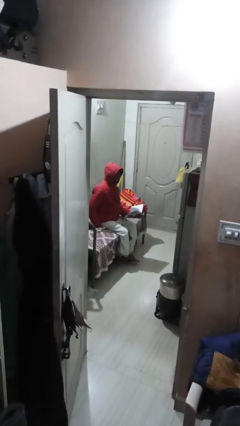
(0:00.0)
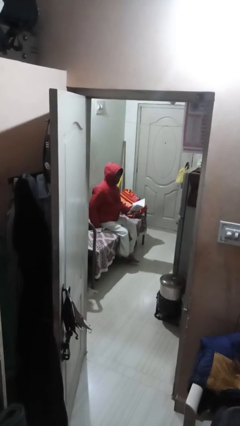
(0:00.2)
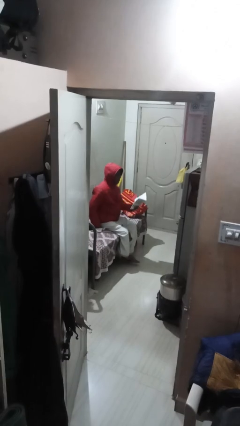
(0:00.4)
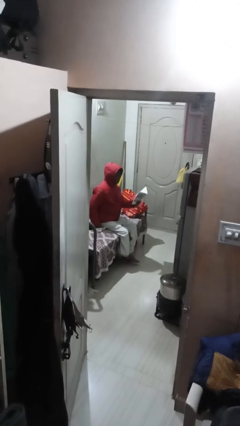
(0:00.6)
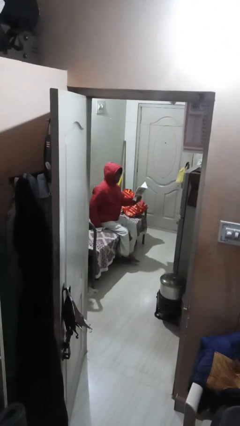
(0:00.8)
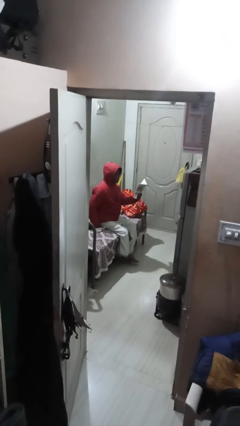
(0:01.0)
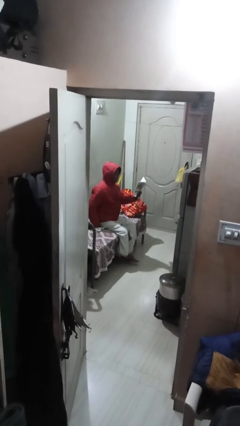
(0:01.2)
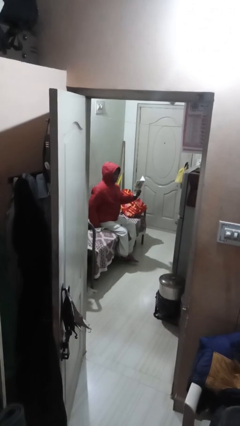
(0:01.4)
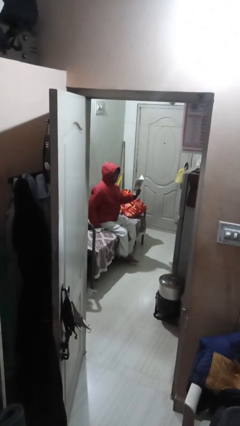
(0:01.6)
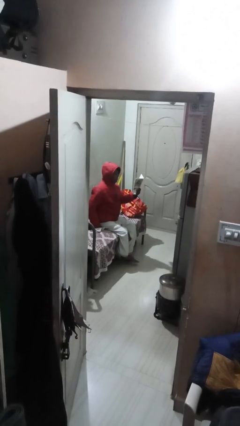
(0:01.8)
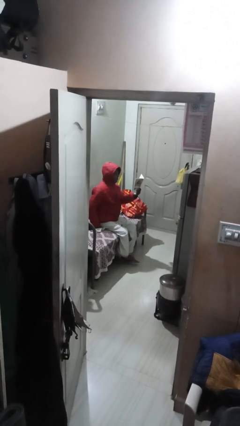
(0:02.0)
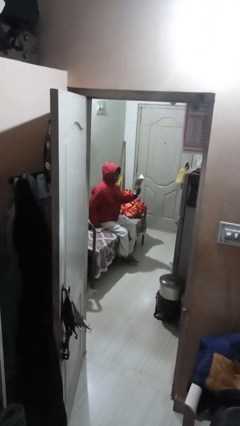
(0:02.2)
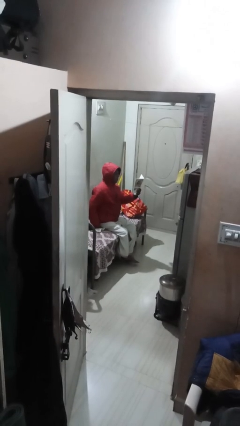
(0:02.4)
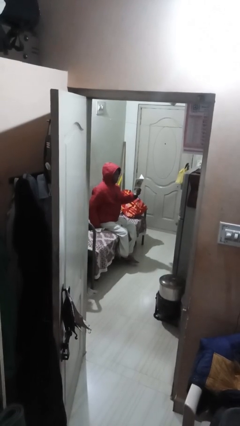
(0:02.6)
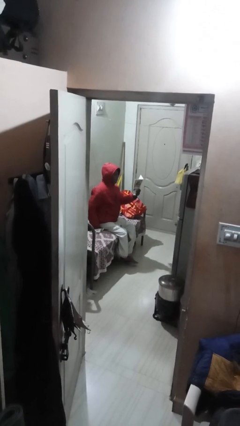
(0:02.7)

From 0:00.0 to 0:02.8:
person reads document

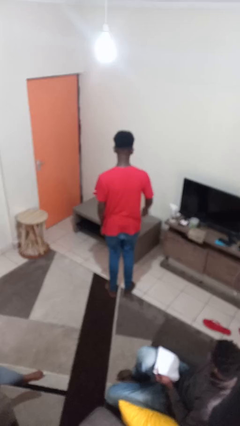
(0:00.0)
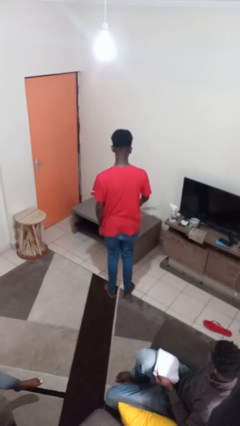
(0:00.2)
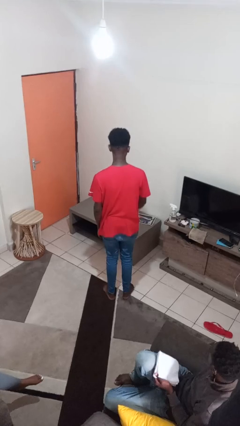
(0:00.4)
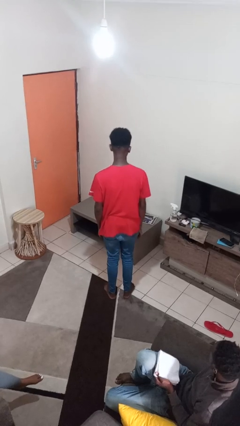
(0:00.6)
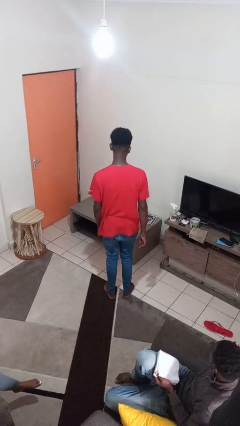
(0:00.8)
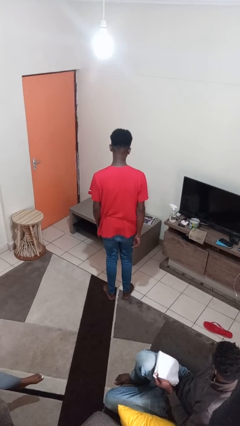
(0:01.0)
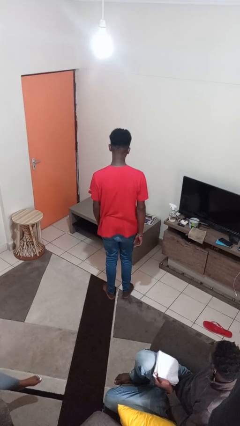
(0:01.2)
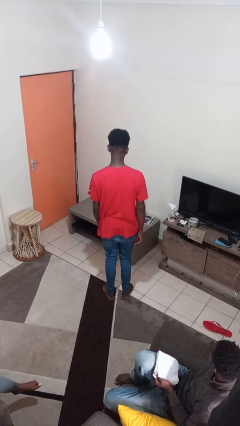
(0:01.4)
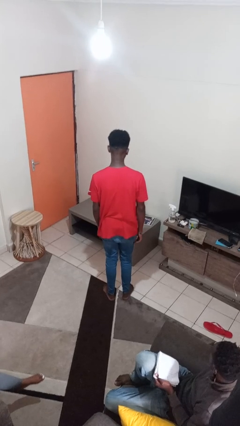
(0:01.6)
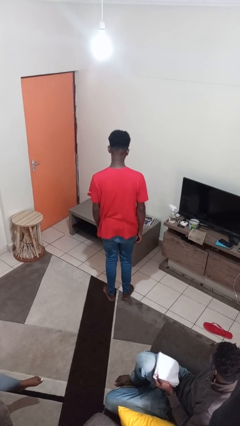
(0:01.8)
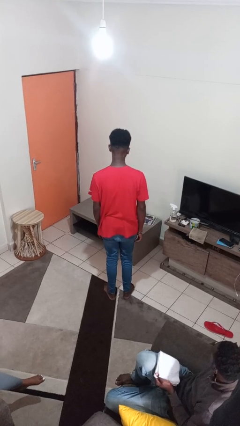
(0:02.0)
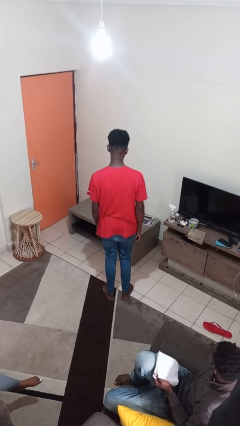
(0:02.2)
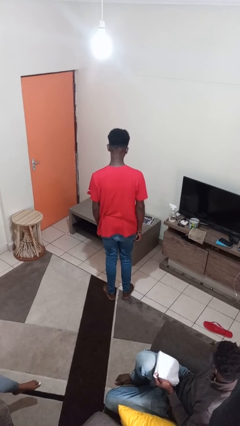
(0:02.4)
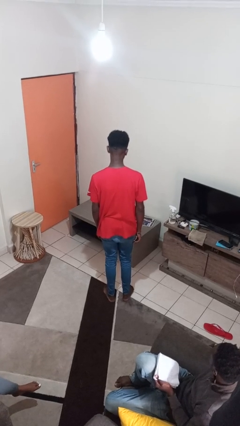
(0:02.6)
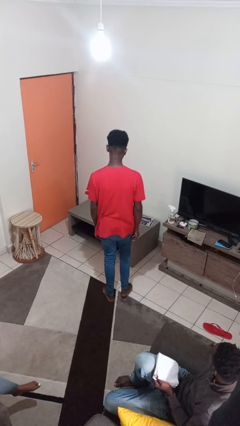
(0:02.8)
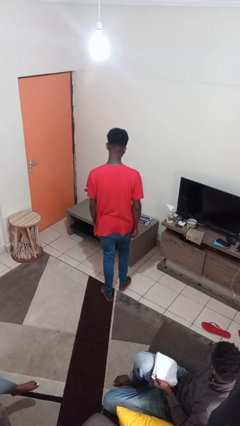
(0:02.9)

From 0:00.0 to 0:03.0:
person throws object on table

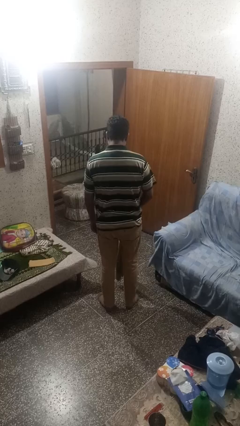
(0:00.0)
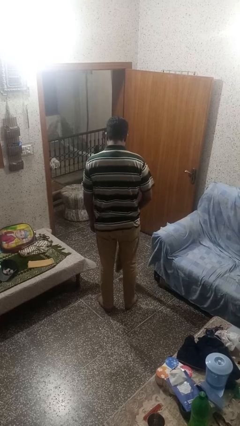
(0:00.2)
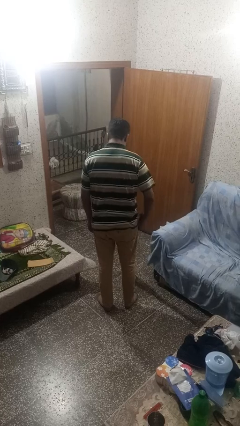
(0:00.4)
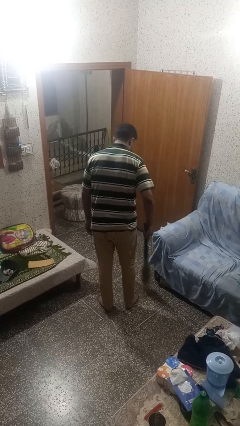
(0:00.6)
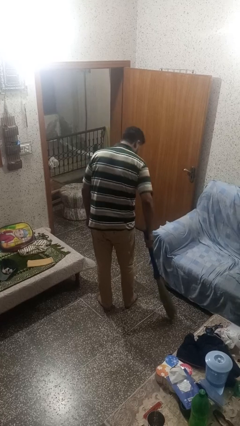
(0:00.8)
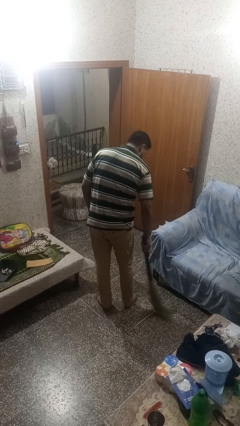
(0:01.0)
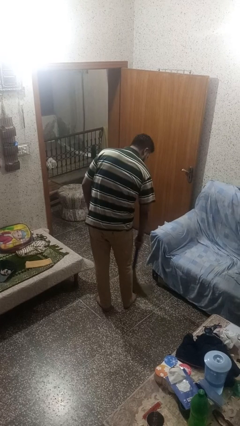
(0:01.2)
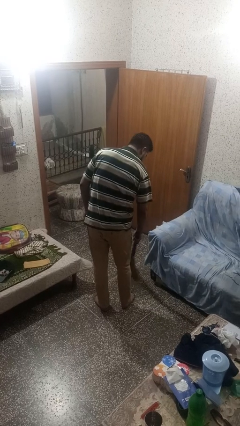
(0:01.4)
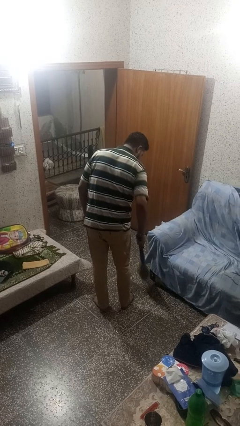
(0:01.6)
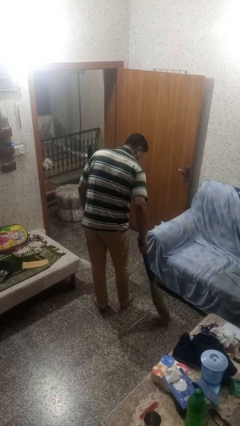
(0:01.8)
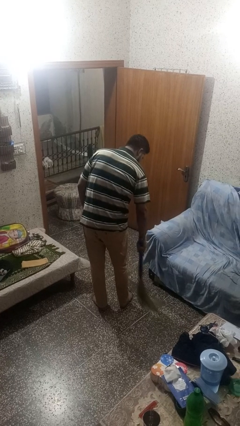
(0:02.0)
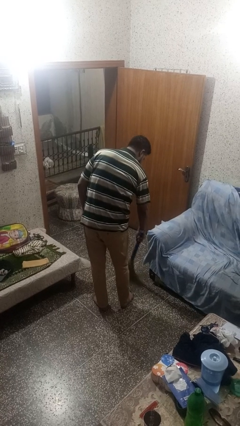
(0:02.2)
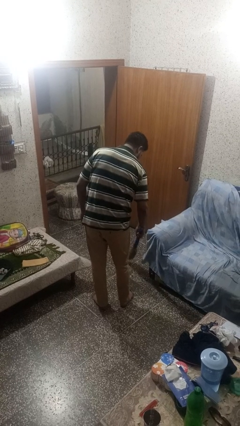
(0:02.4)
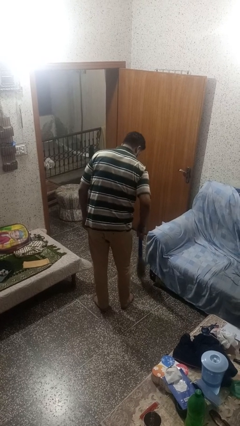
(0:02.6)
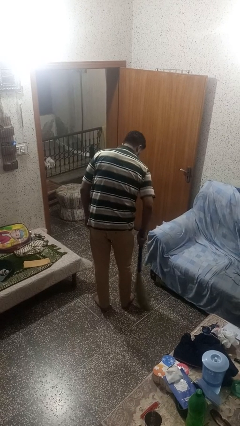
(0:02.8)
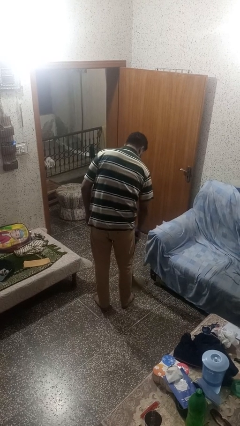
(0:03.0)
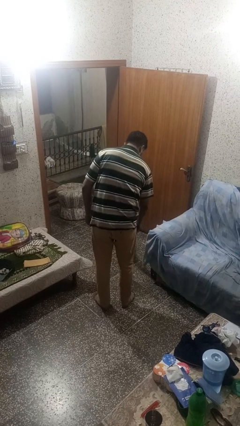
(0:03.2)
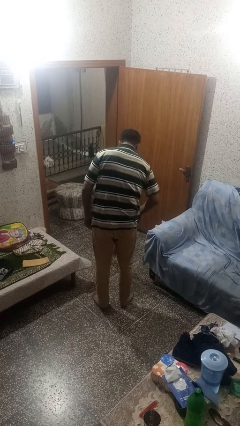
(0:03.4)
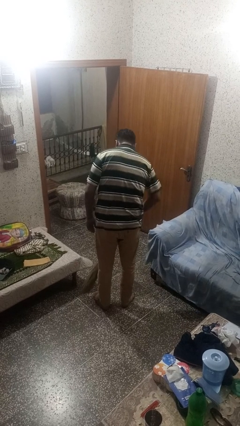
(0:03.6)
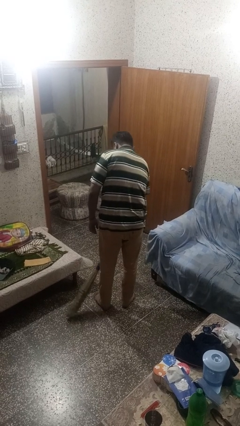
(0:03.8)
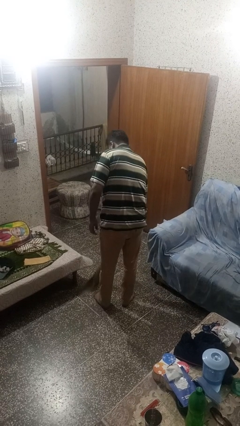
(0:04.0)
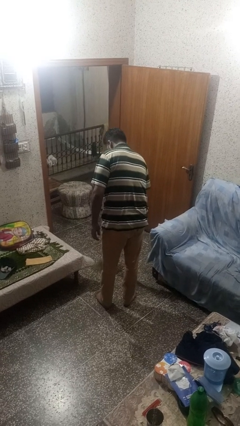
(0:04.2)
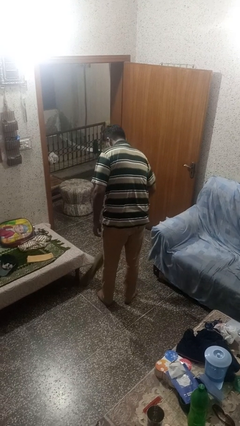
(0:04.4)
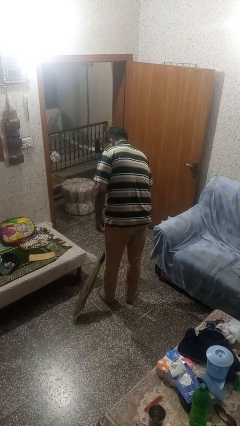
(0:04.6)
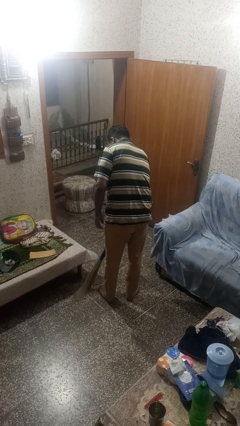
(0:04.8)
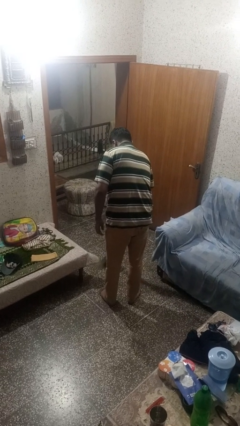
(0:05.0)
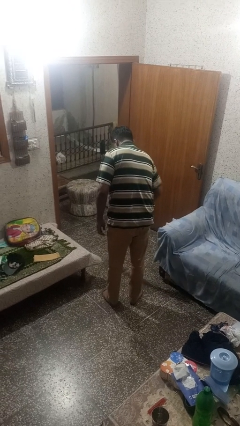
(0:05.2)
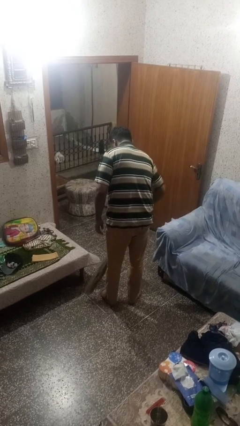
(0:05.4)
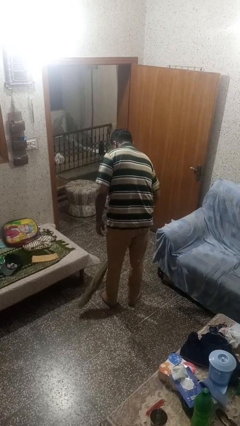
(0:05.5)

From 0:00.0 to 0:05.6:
person sweeps floor

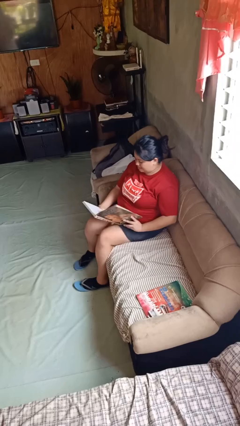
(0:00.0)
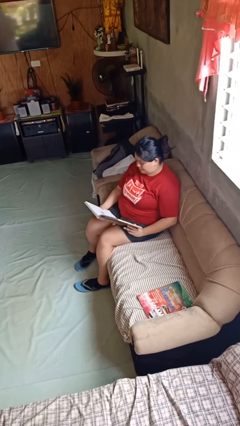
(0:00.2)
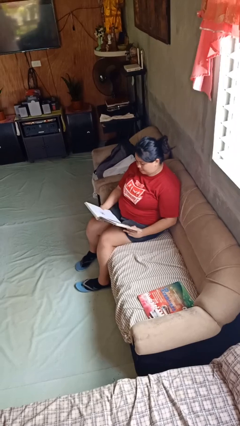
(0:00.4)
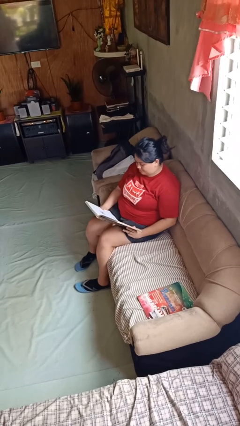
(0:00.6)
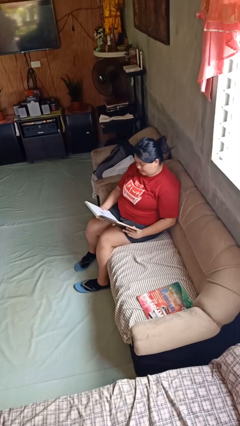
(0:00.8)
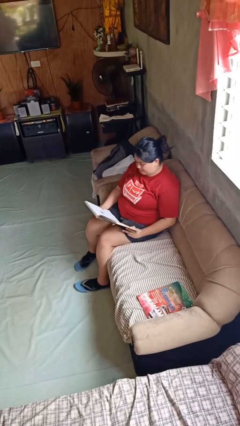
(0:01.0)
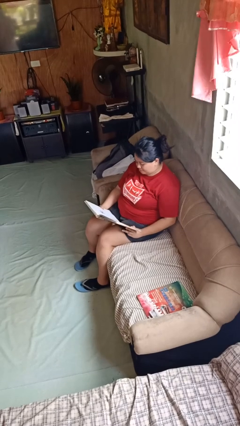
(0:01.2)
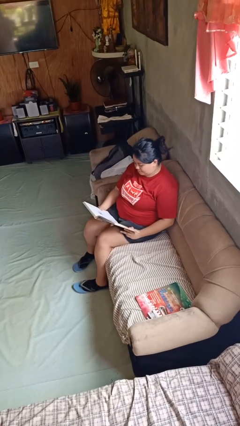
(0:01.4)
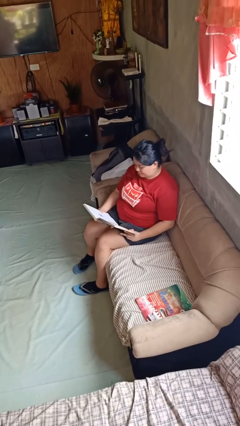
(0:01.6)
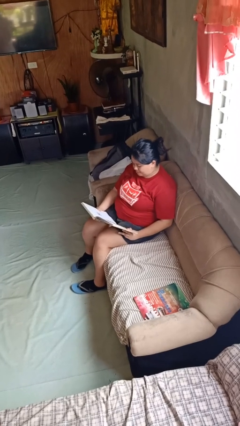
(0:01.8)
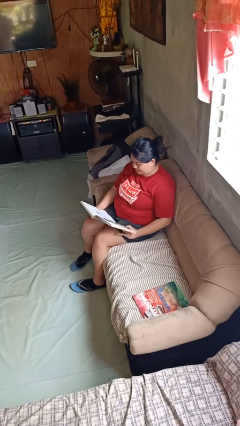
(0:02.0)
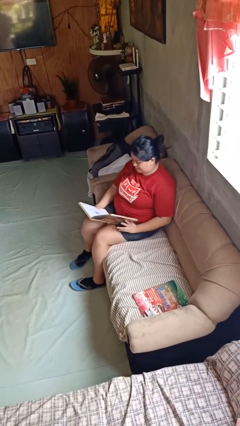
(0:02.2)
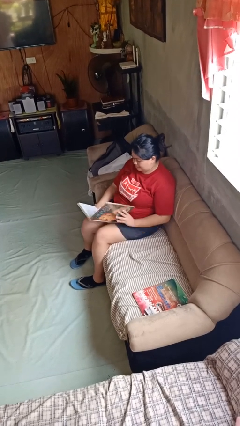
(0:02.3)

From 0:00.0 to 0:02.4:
person reads book

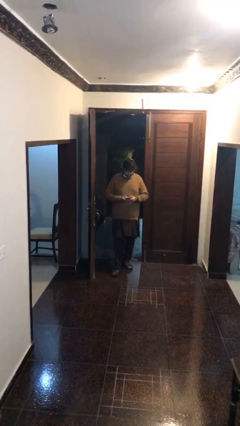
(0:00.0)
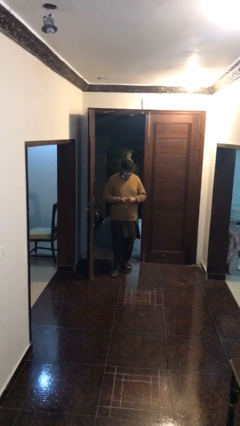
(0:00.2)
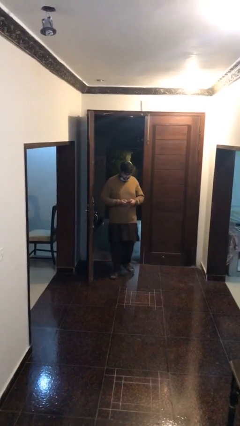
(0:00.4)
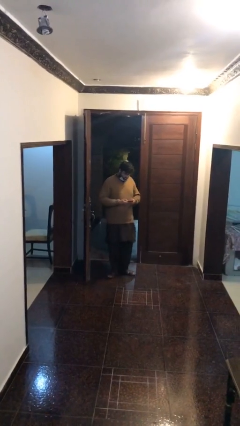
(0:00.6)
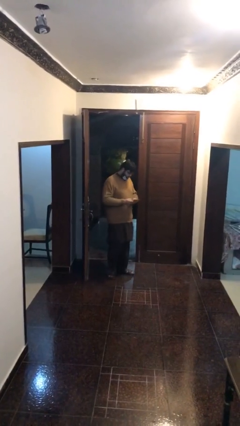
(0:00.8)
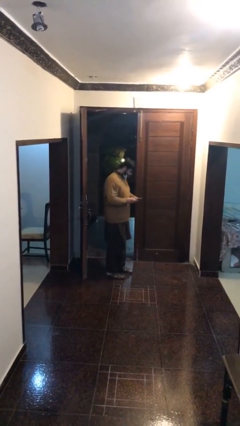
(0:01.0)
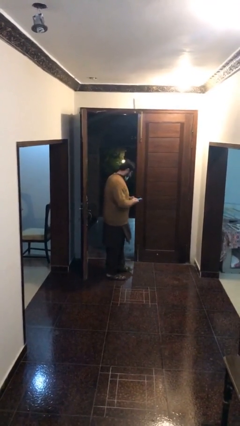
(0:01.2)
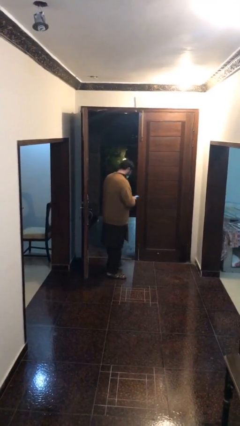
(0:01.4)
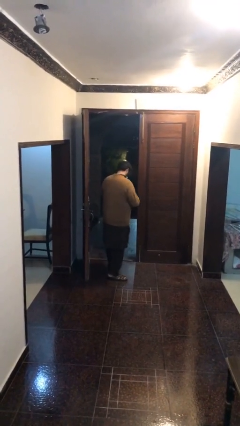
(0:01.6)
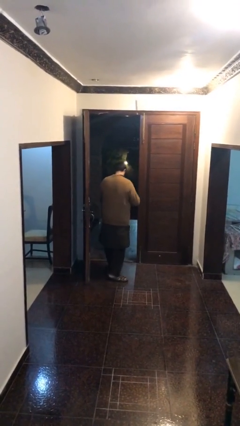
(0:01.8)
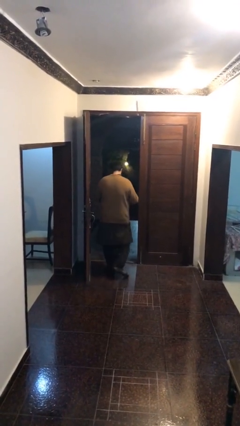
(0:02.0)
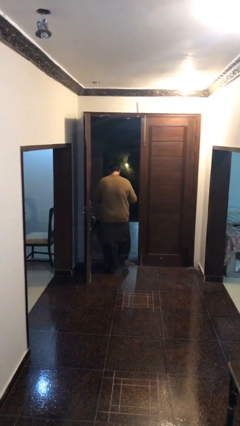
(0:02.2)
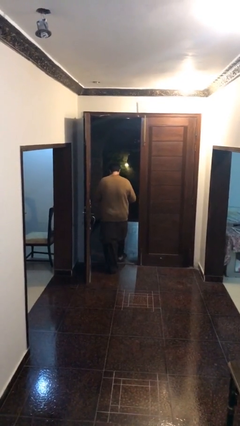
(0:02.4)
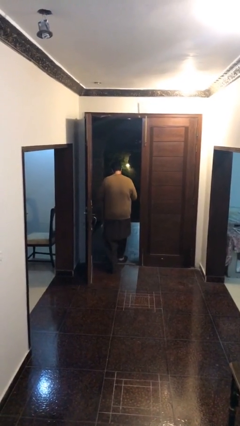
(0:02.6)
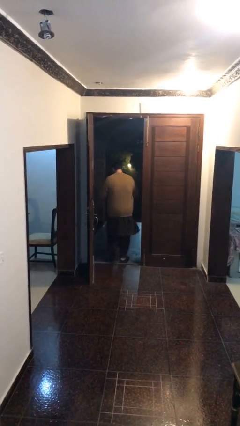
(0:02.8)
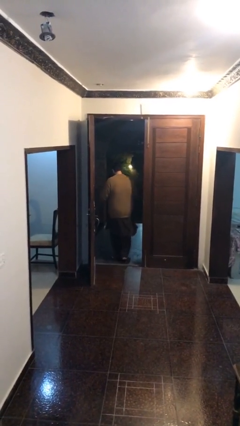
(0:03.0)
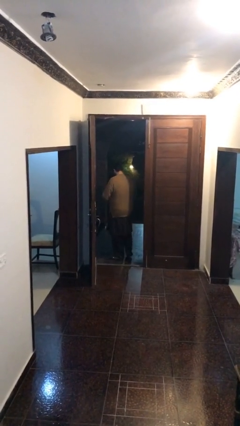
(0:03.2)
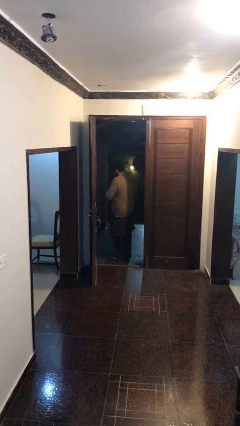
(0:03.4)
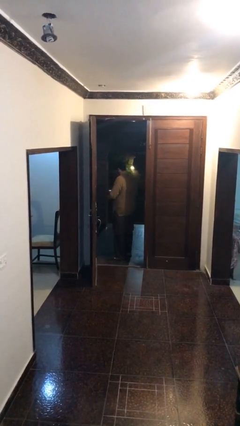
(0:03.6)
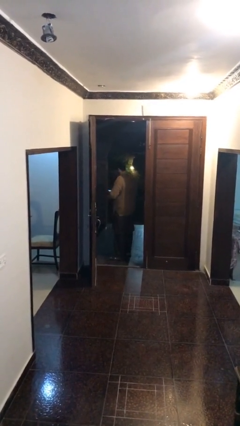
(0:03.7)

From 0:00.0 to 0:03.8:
person exits scene through structure

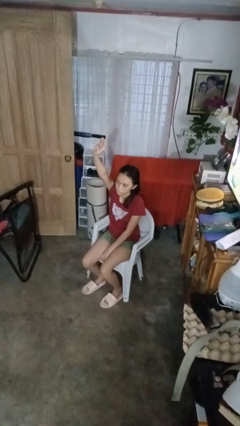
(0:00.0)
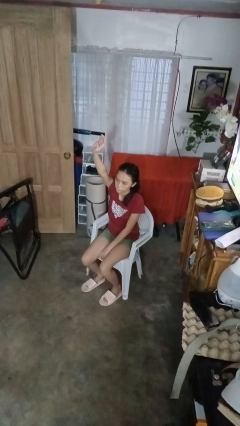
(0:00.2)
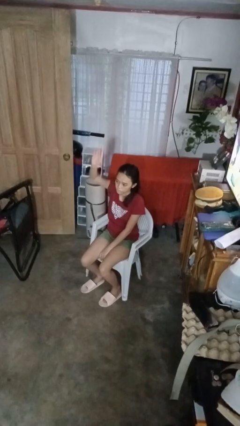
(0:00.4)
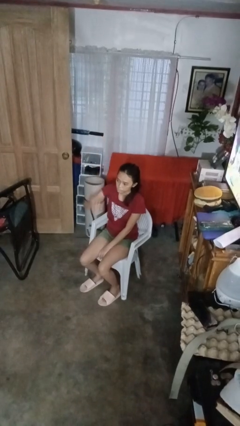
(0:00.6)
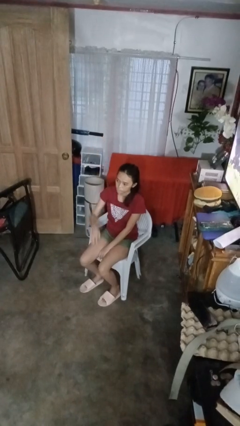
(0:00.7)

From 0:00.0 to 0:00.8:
person gestures lower hand
